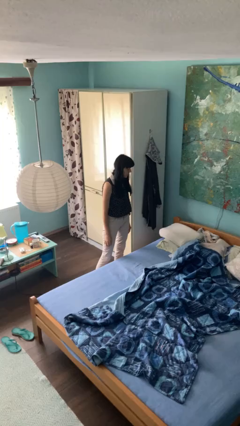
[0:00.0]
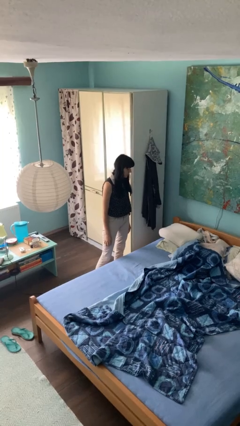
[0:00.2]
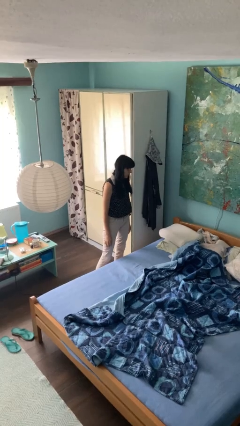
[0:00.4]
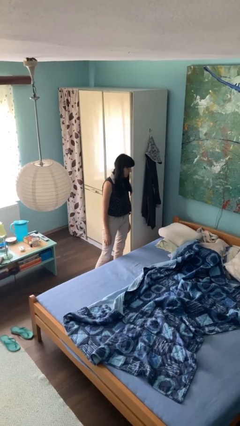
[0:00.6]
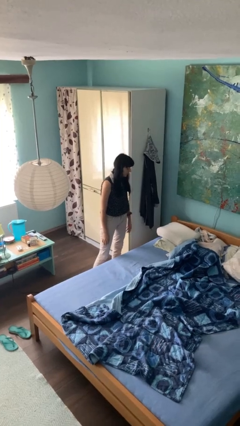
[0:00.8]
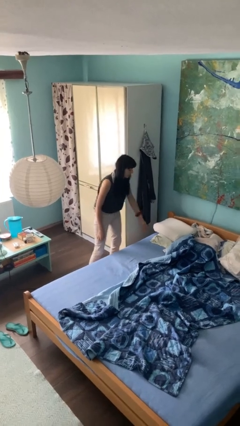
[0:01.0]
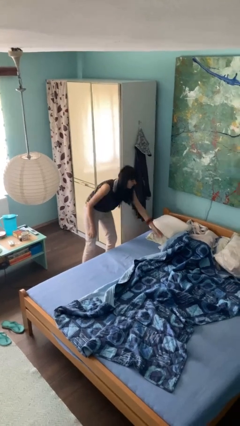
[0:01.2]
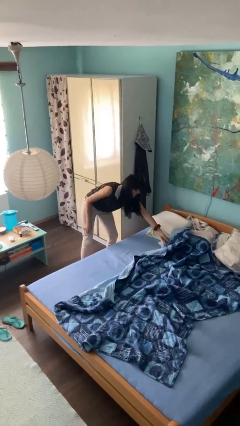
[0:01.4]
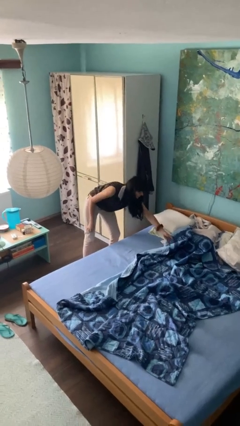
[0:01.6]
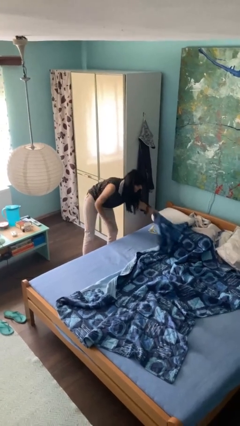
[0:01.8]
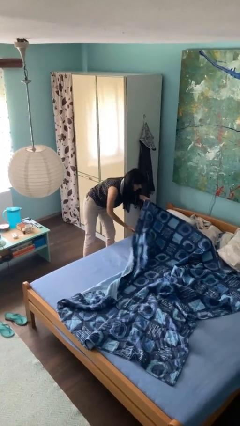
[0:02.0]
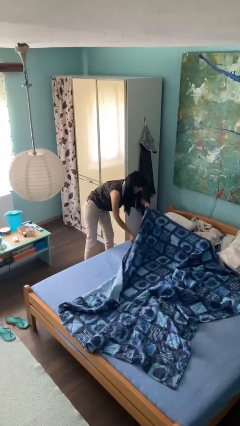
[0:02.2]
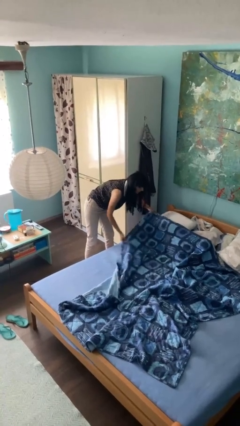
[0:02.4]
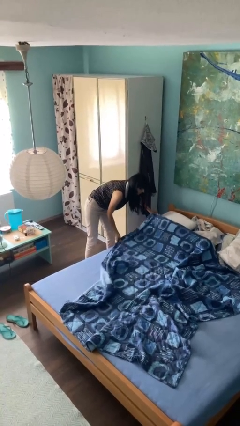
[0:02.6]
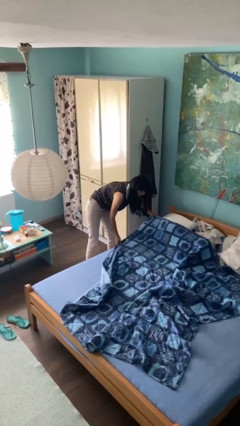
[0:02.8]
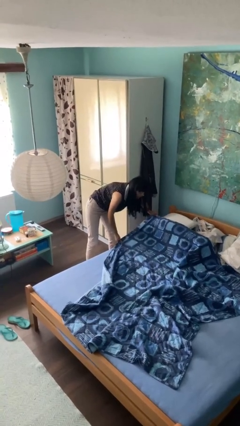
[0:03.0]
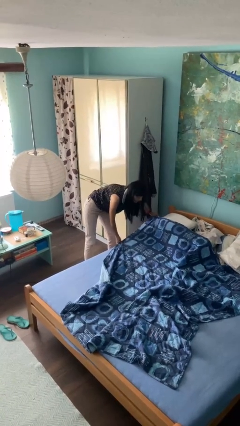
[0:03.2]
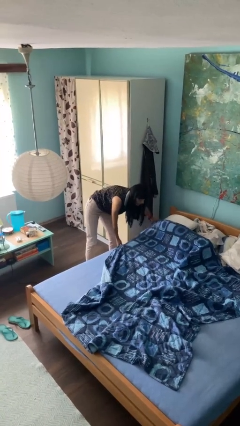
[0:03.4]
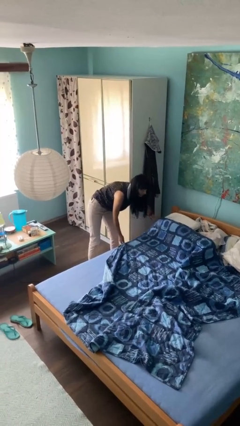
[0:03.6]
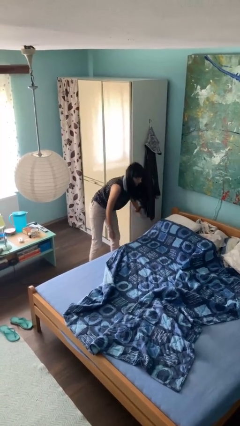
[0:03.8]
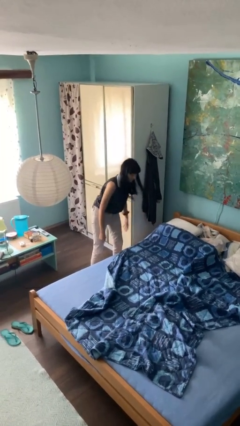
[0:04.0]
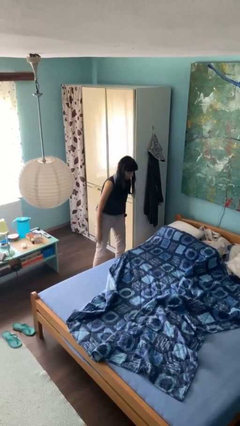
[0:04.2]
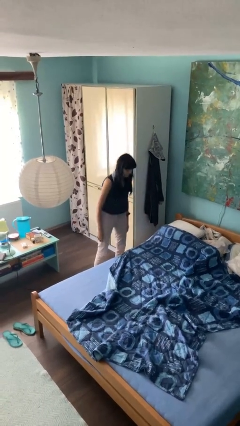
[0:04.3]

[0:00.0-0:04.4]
person makes bed

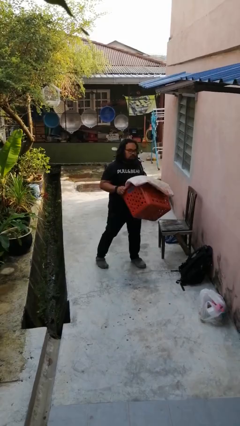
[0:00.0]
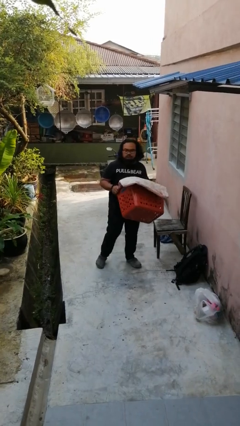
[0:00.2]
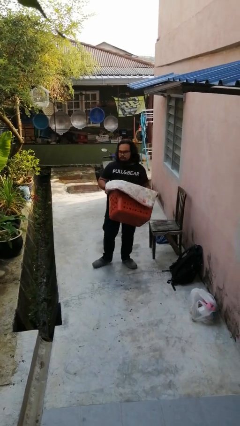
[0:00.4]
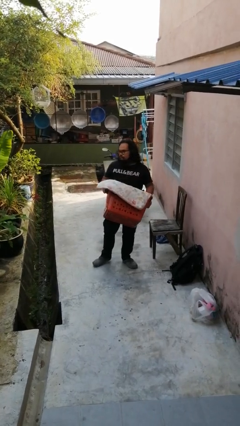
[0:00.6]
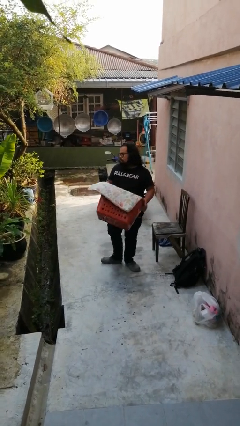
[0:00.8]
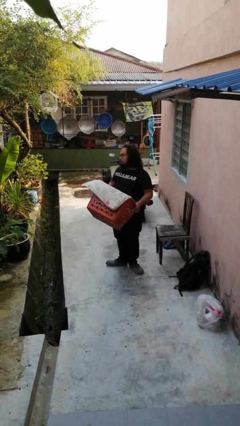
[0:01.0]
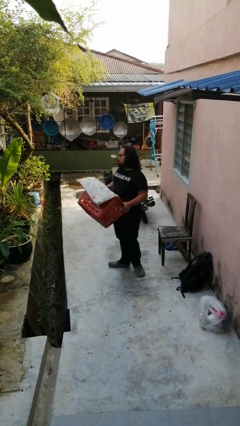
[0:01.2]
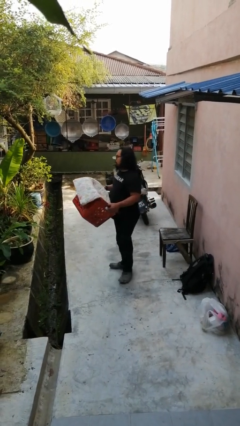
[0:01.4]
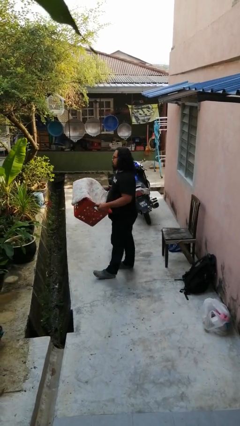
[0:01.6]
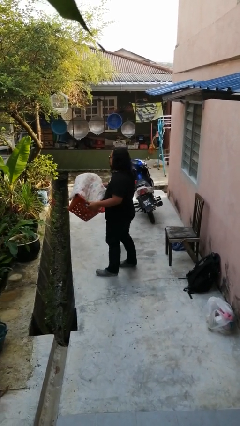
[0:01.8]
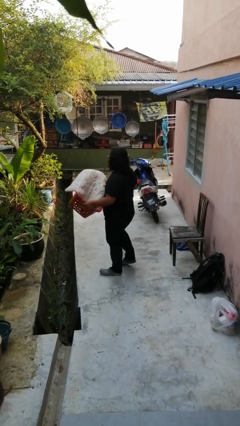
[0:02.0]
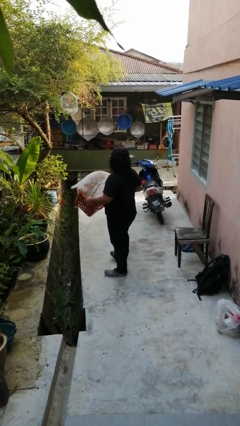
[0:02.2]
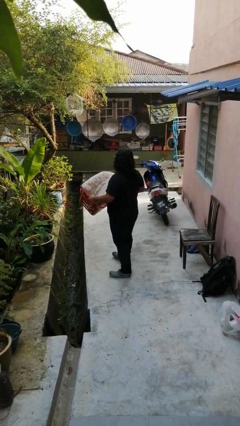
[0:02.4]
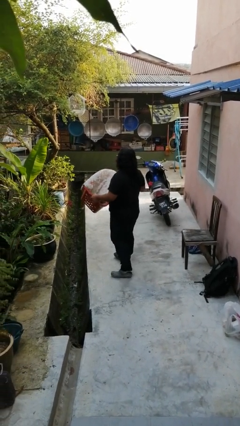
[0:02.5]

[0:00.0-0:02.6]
person carries laundry basket

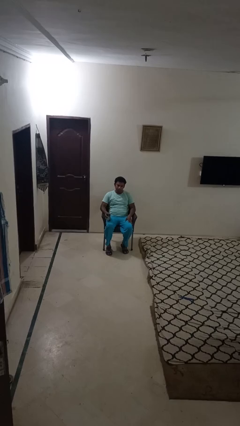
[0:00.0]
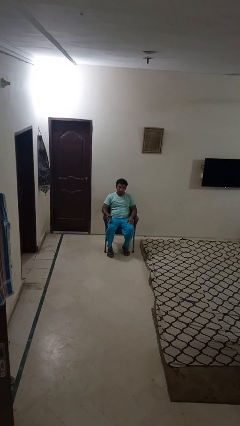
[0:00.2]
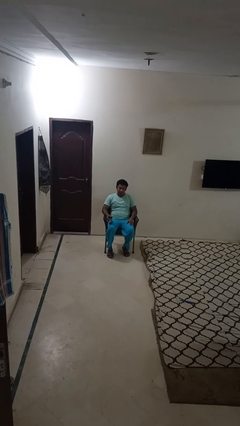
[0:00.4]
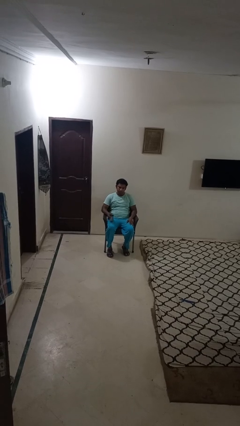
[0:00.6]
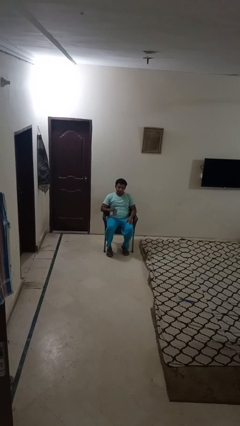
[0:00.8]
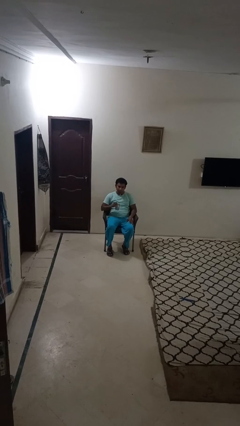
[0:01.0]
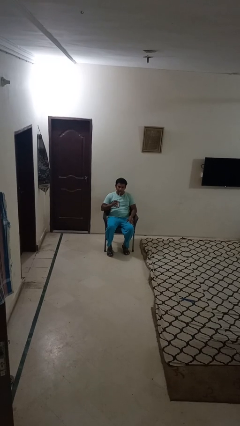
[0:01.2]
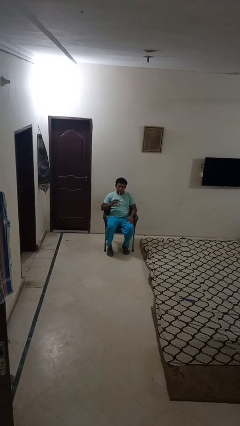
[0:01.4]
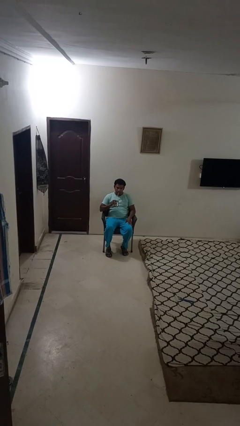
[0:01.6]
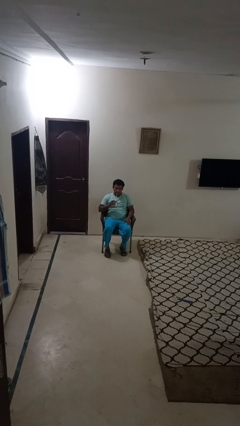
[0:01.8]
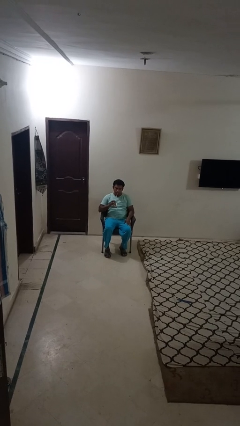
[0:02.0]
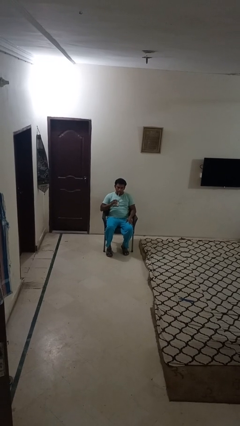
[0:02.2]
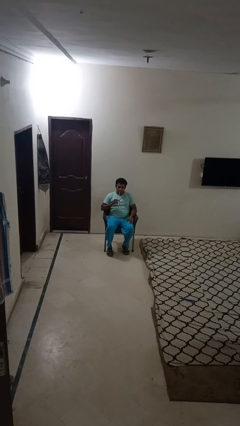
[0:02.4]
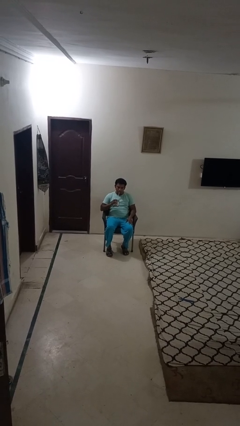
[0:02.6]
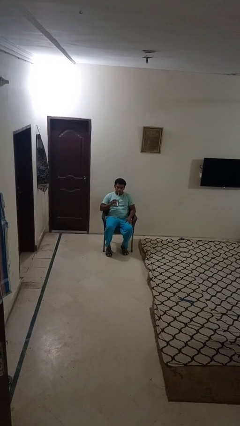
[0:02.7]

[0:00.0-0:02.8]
person drinks from straw

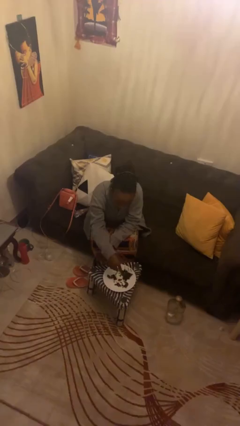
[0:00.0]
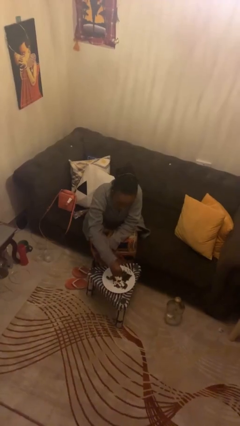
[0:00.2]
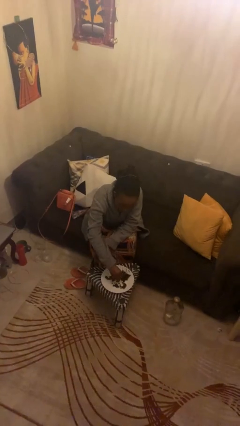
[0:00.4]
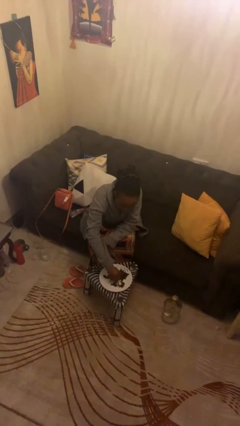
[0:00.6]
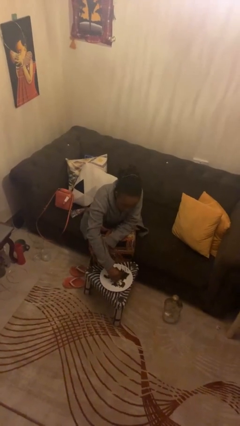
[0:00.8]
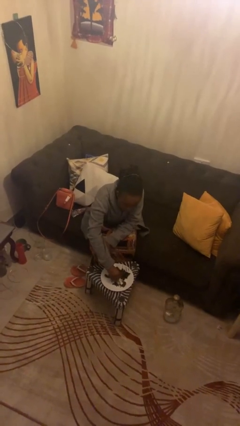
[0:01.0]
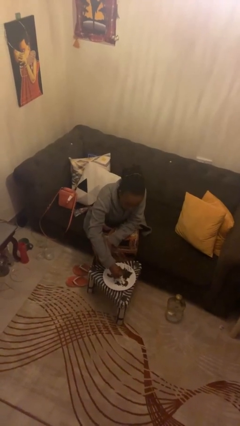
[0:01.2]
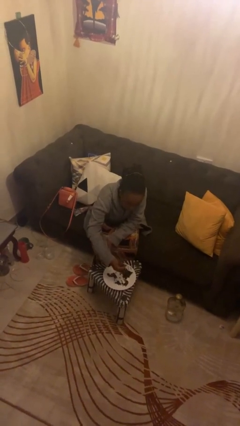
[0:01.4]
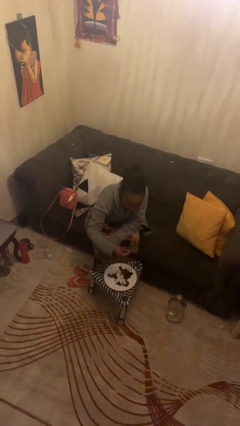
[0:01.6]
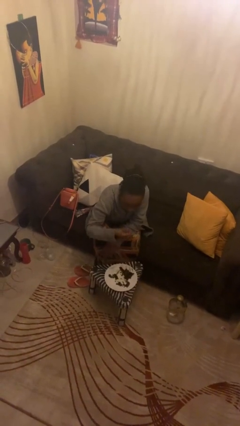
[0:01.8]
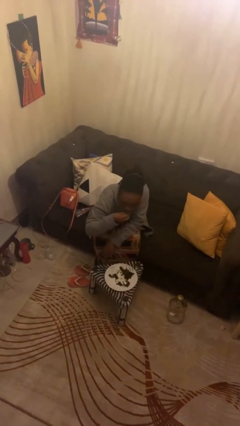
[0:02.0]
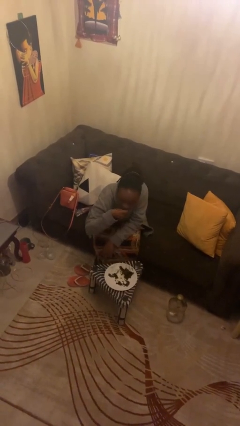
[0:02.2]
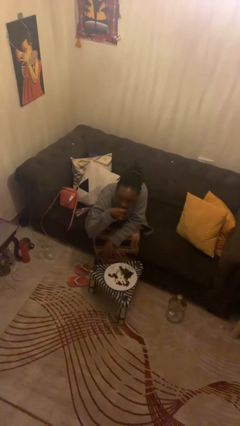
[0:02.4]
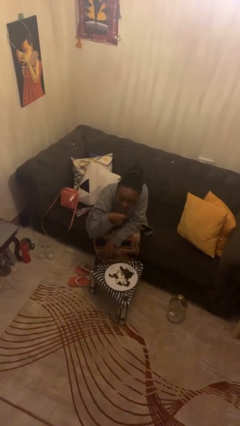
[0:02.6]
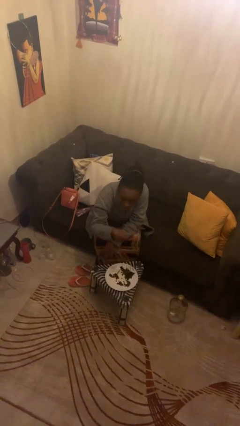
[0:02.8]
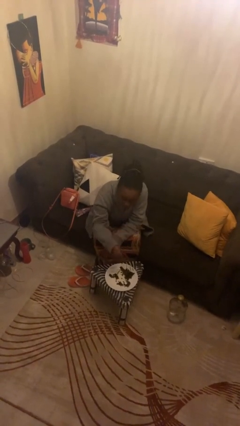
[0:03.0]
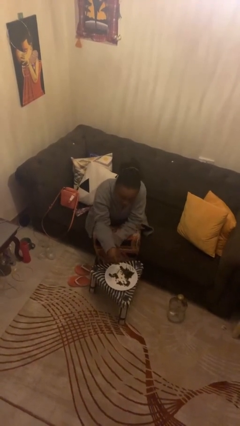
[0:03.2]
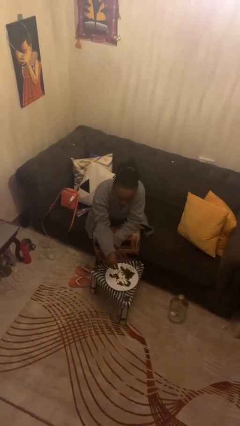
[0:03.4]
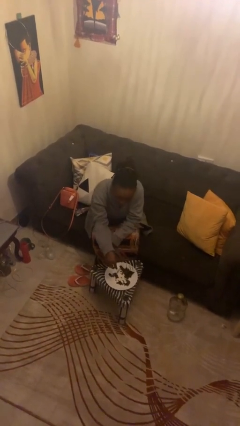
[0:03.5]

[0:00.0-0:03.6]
person eats with hands

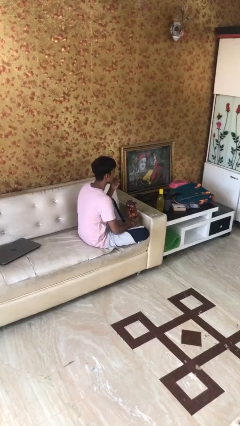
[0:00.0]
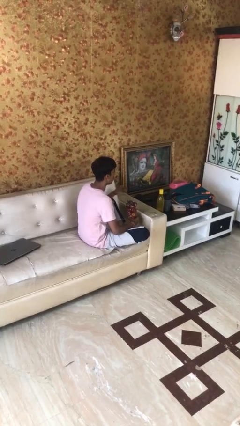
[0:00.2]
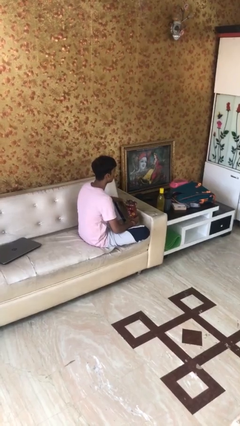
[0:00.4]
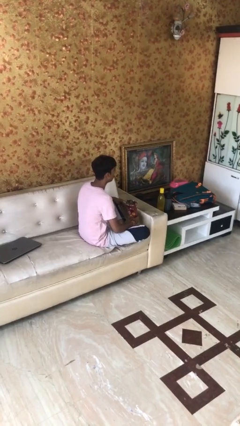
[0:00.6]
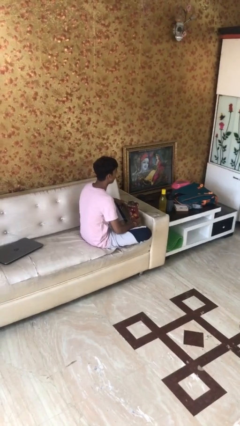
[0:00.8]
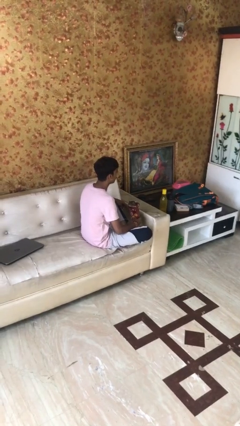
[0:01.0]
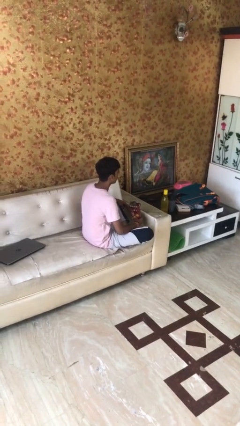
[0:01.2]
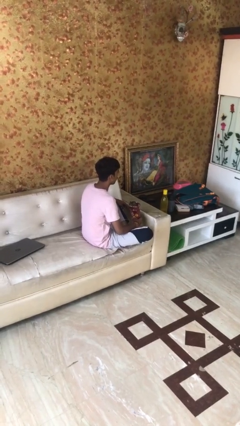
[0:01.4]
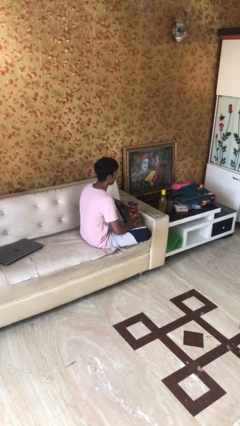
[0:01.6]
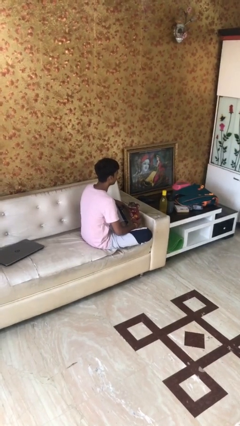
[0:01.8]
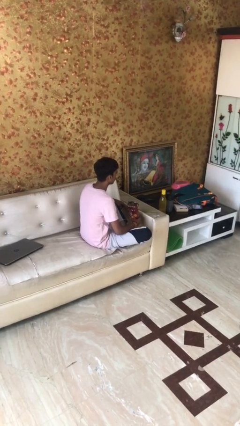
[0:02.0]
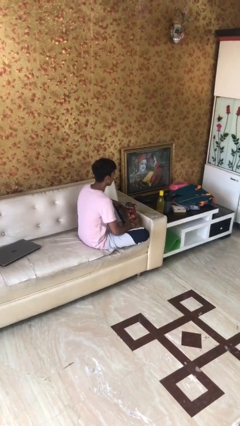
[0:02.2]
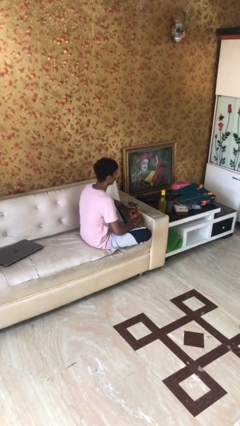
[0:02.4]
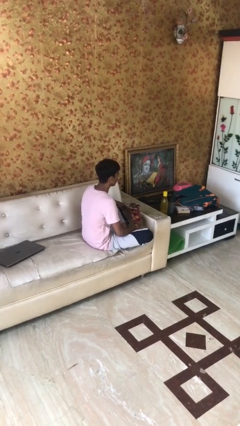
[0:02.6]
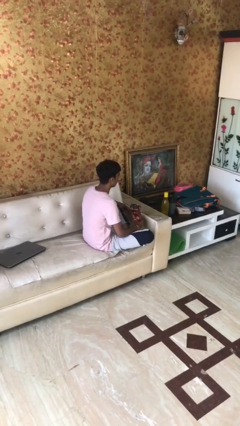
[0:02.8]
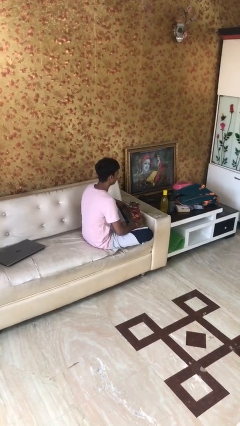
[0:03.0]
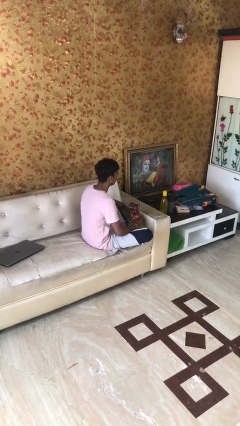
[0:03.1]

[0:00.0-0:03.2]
person eats snack from bag

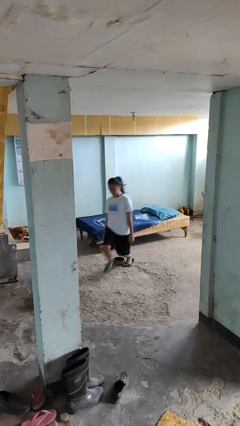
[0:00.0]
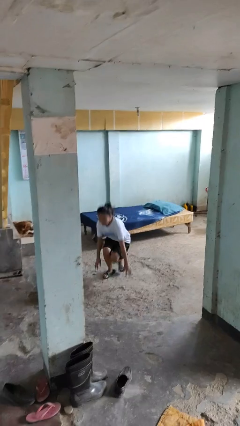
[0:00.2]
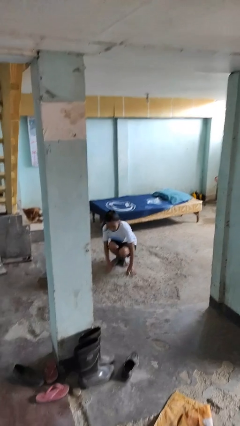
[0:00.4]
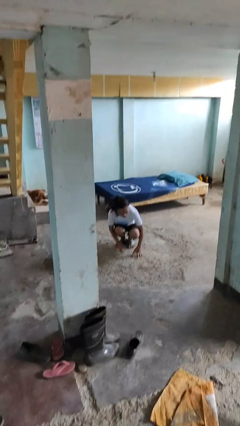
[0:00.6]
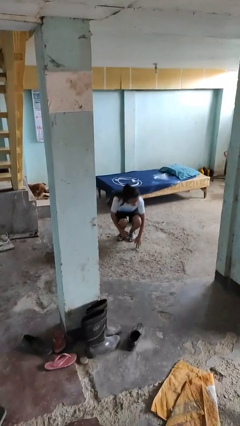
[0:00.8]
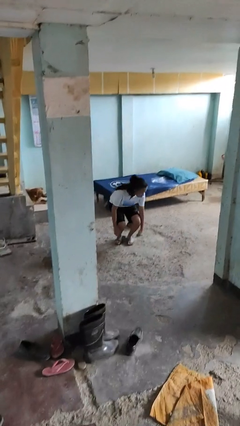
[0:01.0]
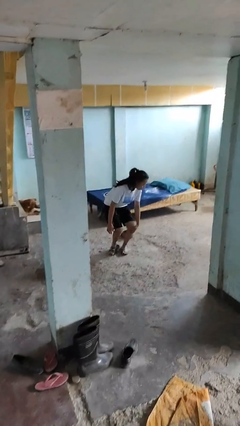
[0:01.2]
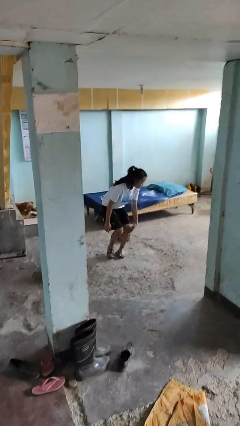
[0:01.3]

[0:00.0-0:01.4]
person lies down on floor
